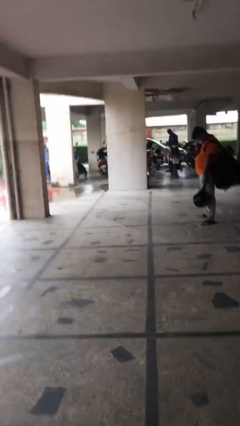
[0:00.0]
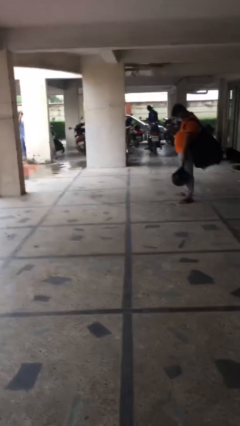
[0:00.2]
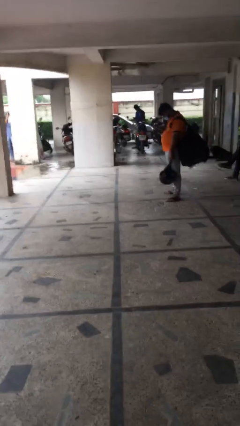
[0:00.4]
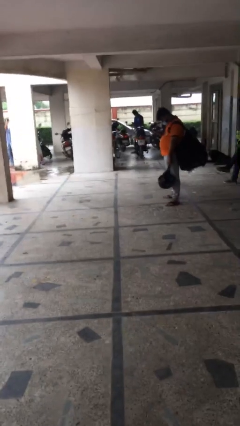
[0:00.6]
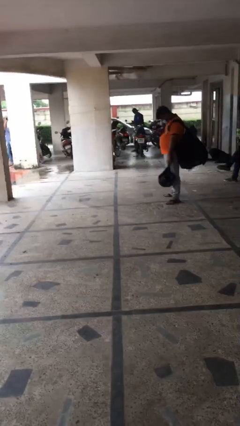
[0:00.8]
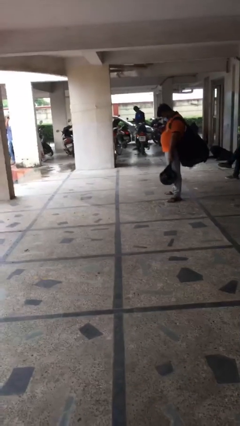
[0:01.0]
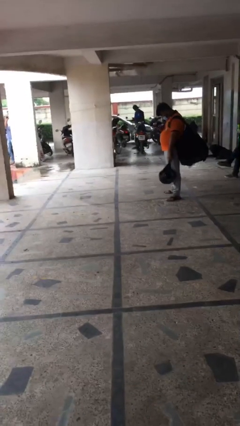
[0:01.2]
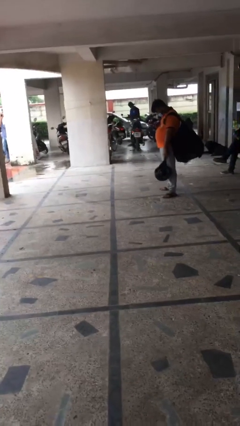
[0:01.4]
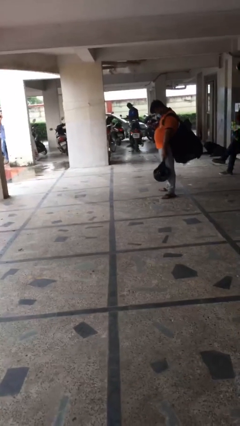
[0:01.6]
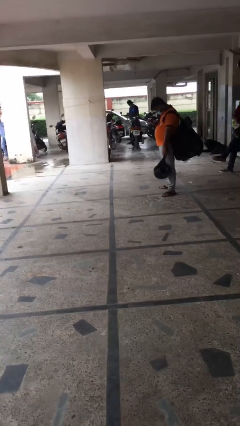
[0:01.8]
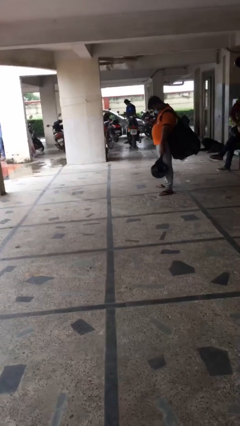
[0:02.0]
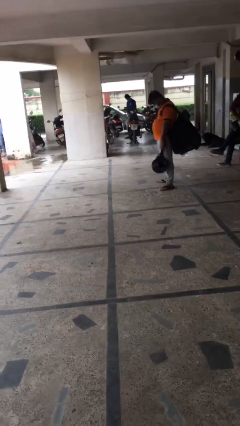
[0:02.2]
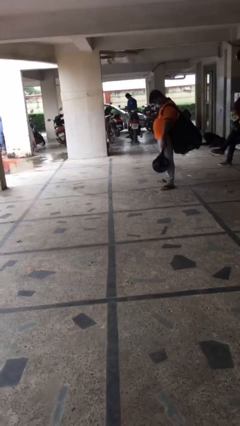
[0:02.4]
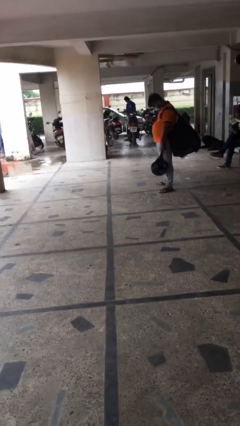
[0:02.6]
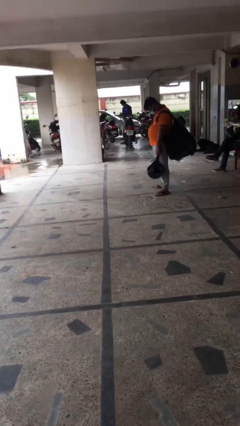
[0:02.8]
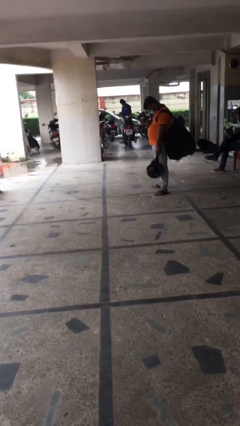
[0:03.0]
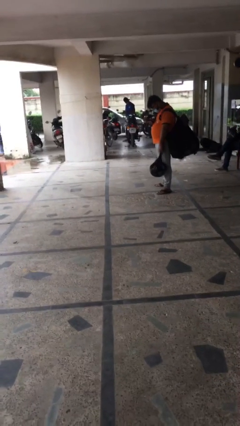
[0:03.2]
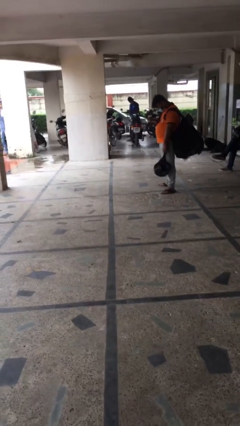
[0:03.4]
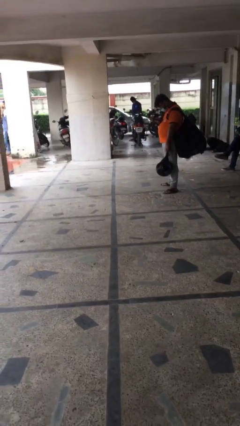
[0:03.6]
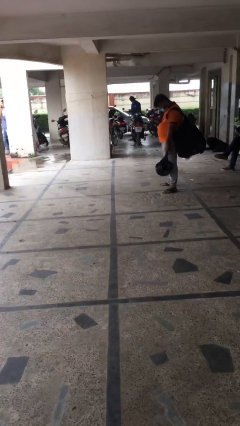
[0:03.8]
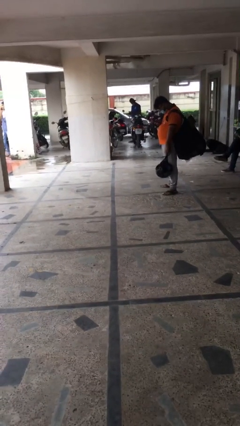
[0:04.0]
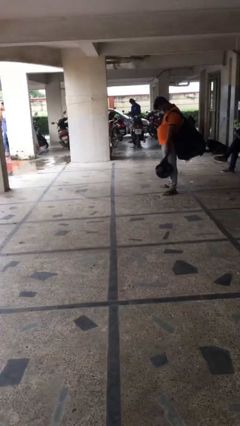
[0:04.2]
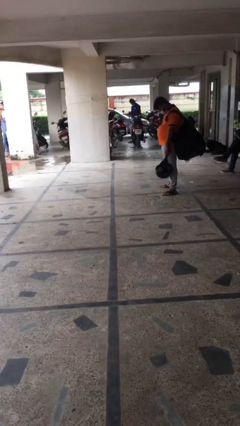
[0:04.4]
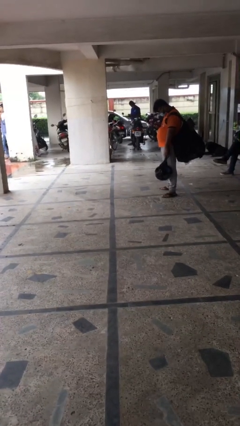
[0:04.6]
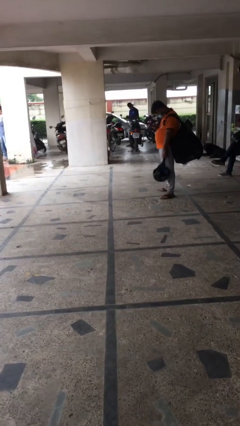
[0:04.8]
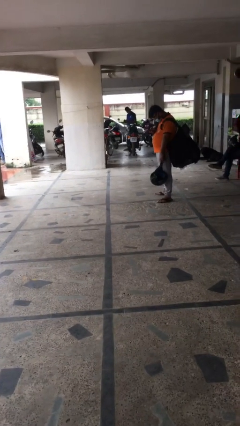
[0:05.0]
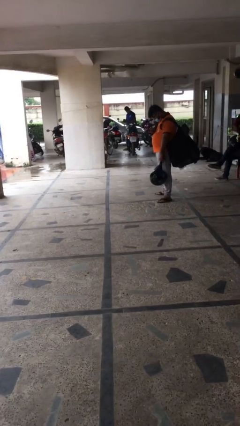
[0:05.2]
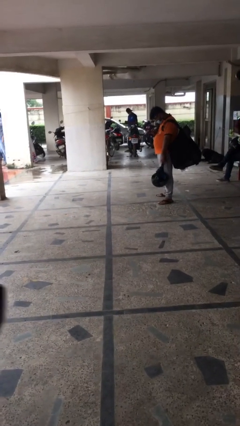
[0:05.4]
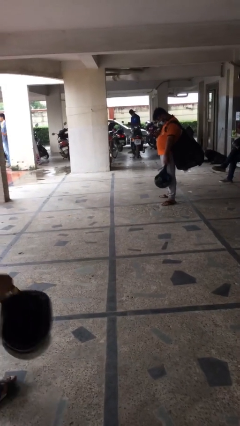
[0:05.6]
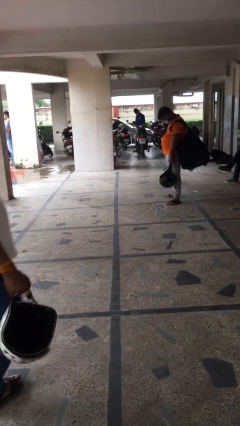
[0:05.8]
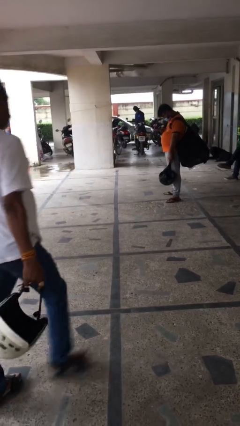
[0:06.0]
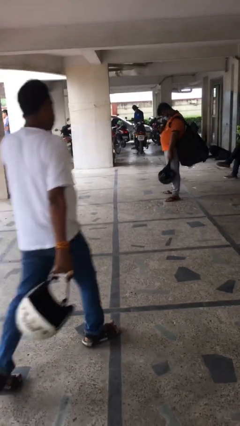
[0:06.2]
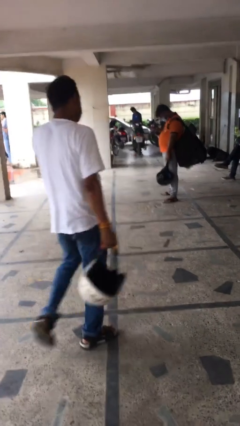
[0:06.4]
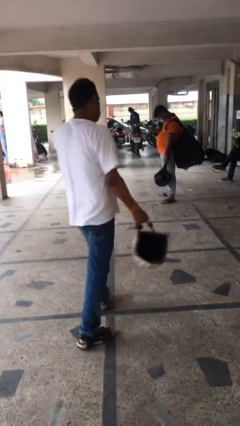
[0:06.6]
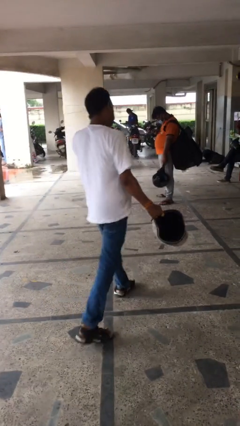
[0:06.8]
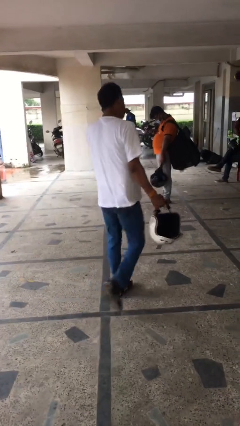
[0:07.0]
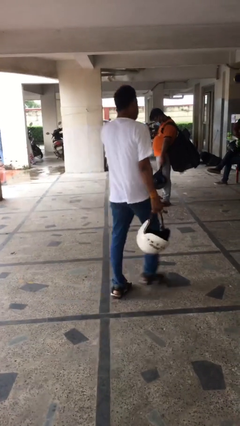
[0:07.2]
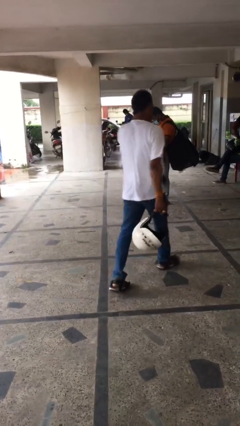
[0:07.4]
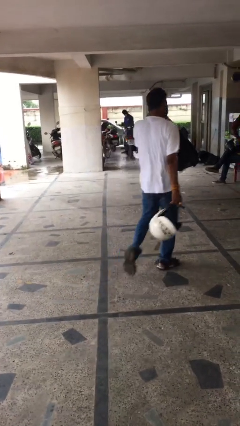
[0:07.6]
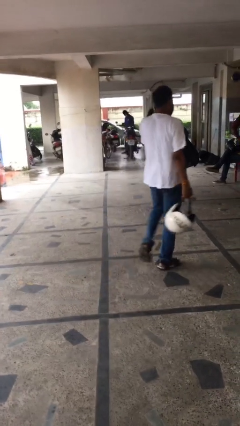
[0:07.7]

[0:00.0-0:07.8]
person texts on phone

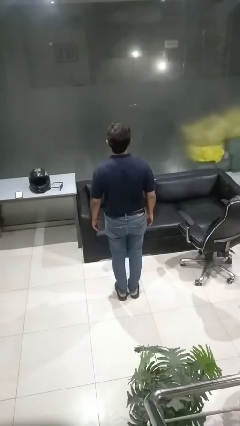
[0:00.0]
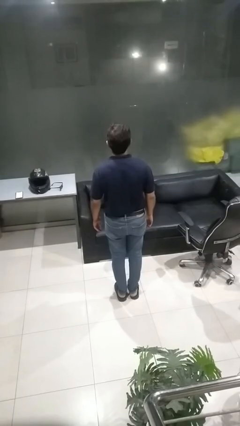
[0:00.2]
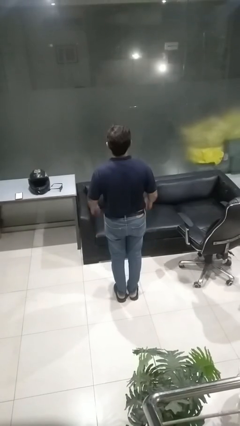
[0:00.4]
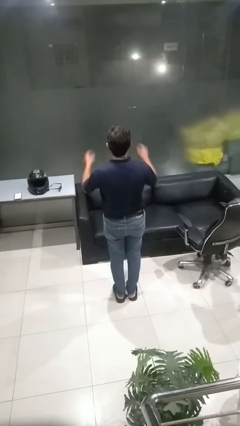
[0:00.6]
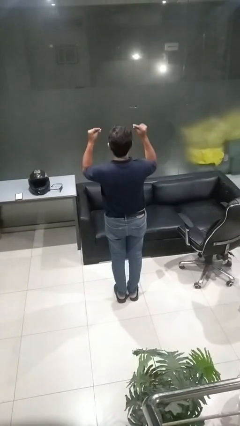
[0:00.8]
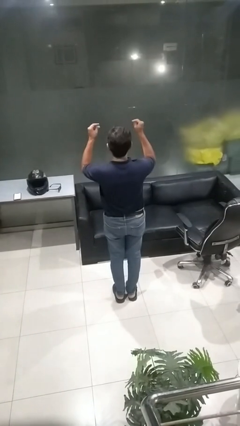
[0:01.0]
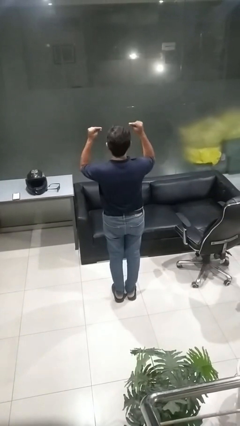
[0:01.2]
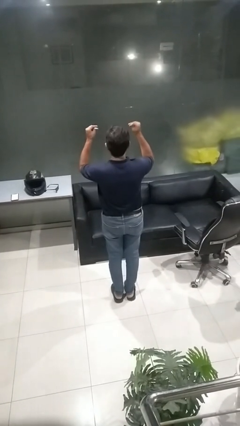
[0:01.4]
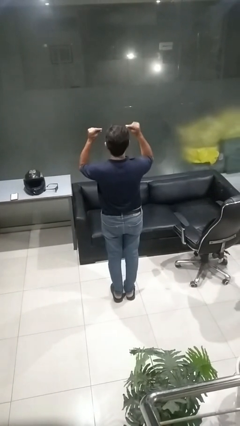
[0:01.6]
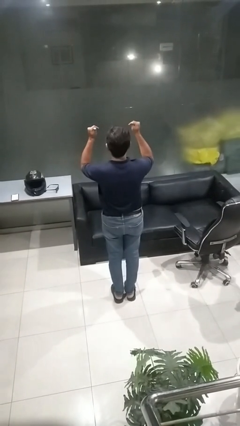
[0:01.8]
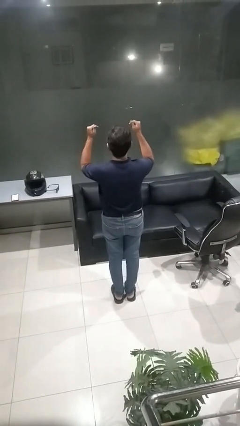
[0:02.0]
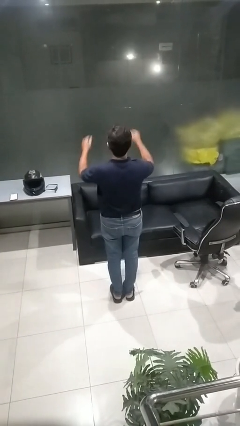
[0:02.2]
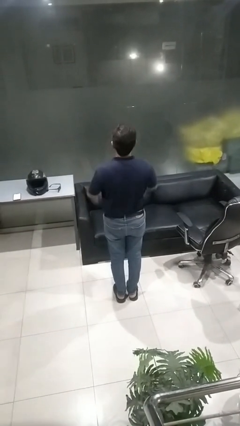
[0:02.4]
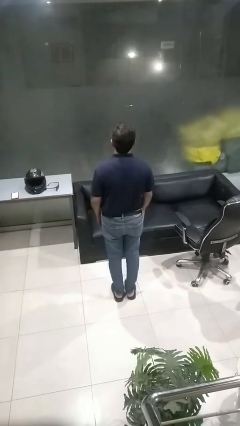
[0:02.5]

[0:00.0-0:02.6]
person snaps fingers

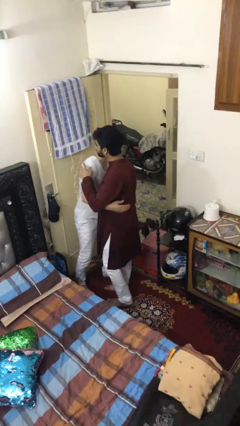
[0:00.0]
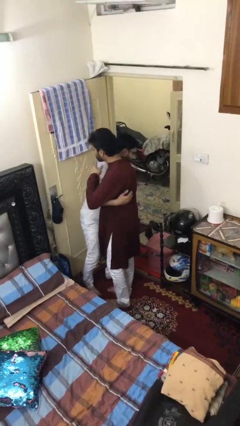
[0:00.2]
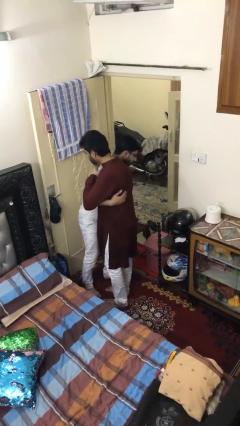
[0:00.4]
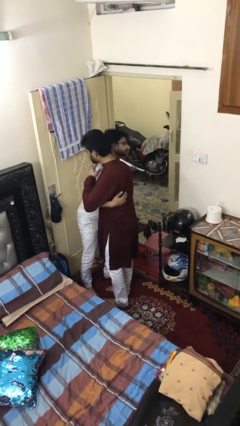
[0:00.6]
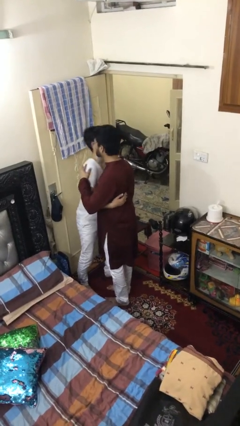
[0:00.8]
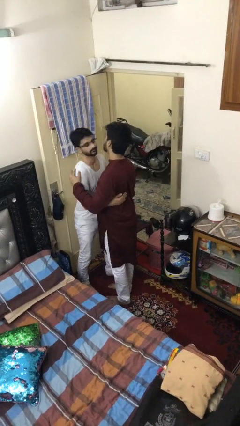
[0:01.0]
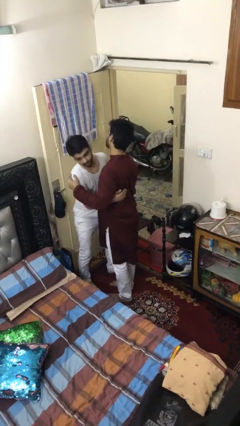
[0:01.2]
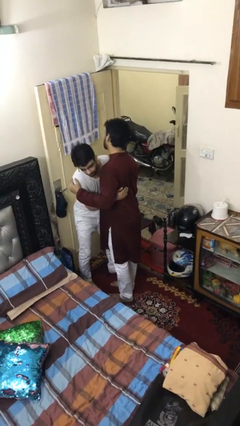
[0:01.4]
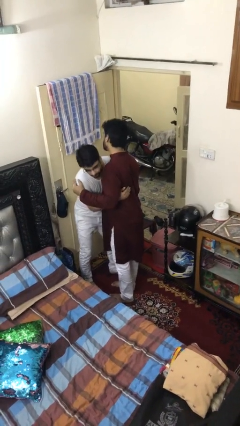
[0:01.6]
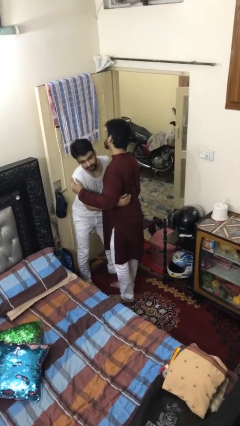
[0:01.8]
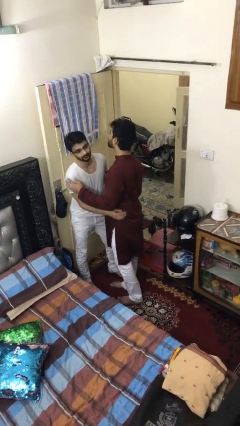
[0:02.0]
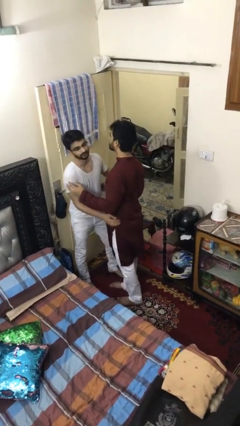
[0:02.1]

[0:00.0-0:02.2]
person embraces person

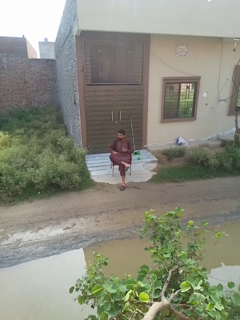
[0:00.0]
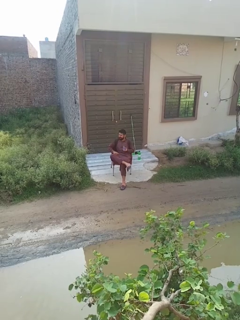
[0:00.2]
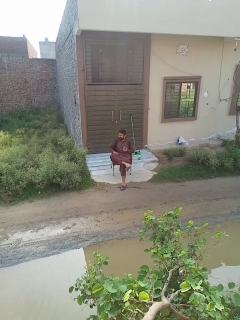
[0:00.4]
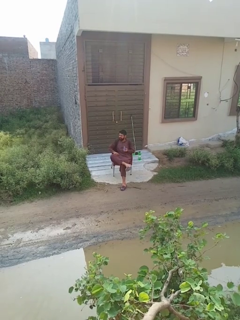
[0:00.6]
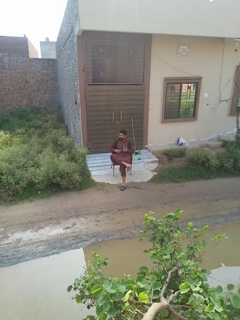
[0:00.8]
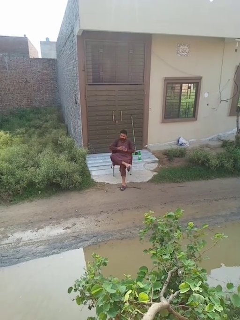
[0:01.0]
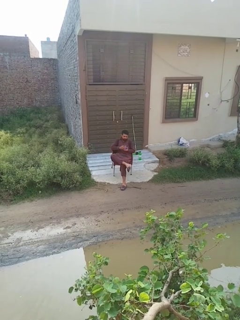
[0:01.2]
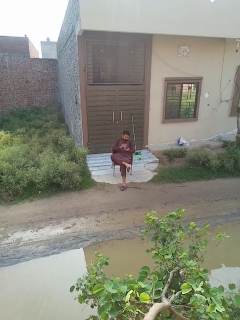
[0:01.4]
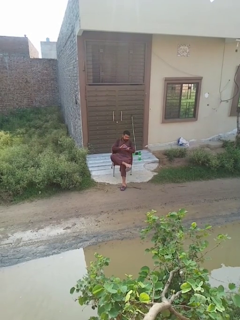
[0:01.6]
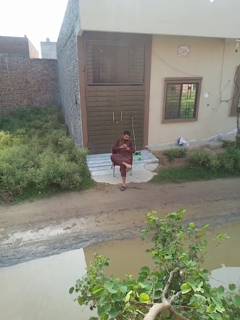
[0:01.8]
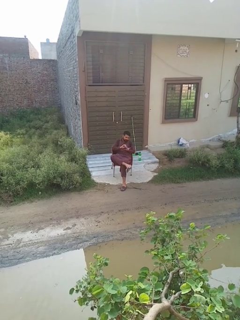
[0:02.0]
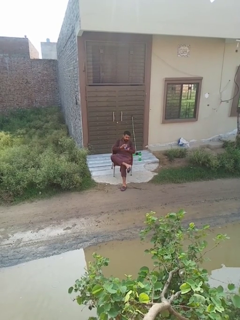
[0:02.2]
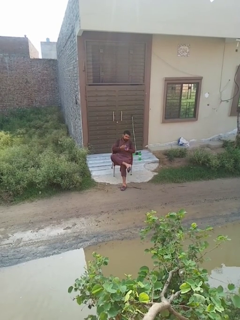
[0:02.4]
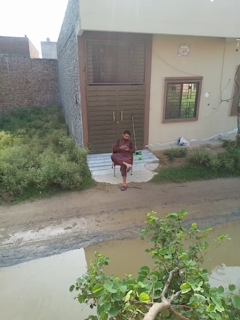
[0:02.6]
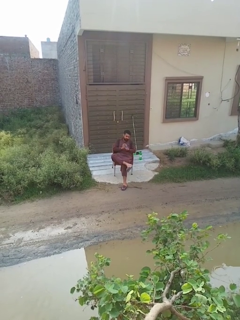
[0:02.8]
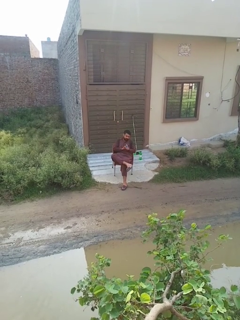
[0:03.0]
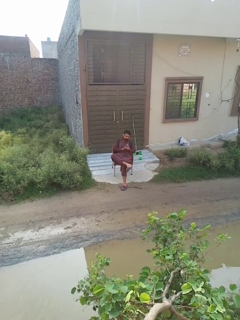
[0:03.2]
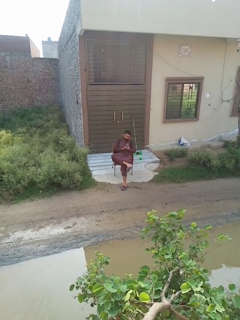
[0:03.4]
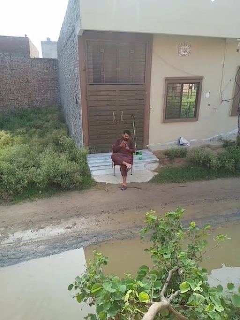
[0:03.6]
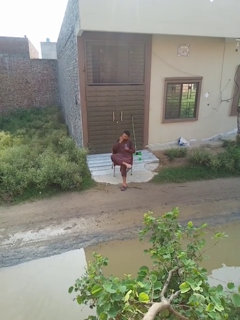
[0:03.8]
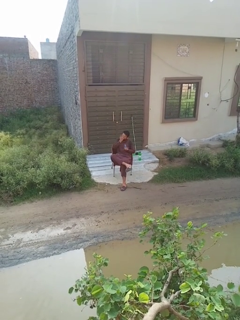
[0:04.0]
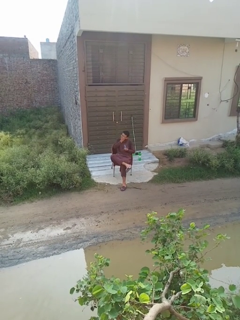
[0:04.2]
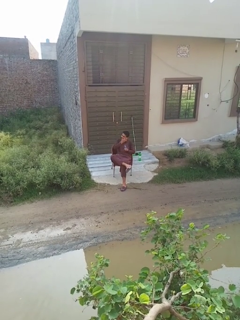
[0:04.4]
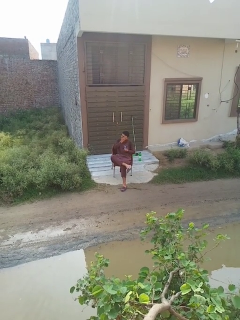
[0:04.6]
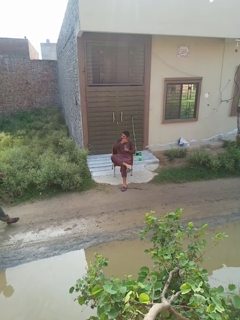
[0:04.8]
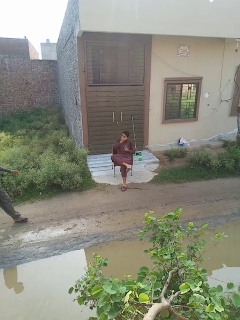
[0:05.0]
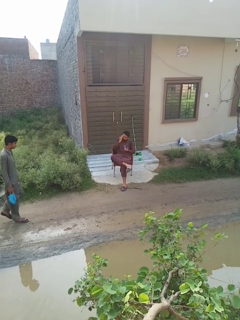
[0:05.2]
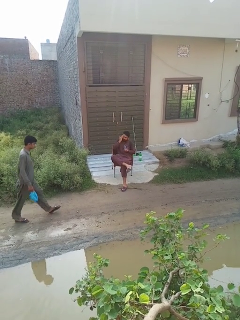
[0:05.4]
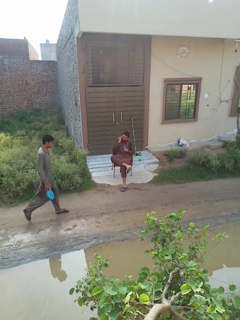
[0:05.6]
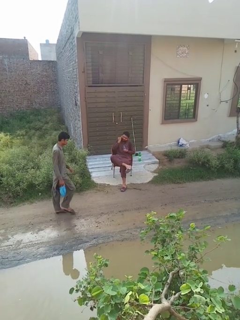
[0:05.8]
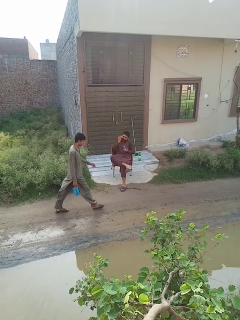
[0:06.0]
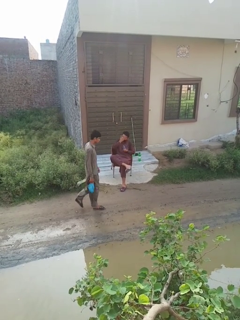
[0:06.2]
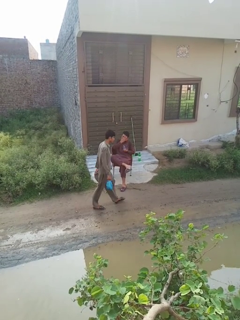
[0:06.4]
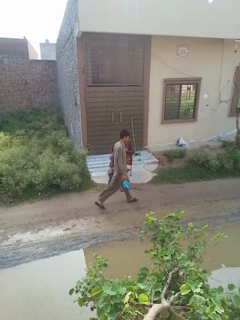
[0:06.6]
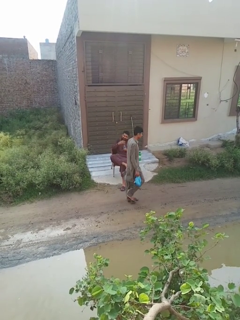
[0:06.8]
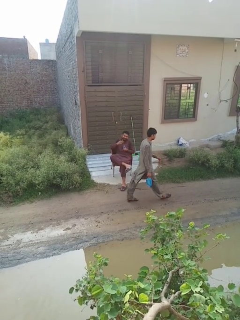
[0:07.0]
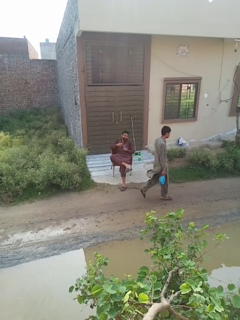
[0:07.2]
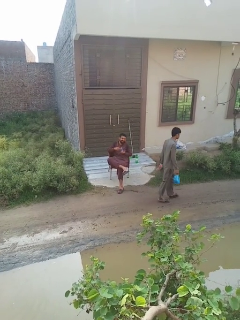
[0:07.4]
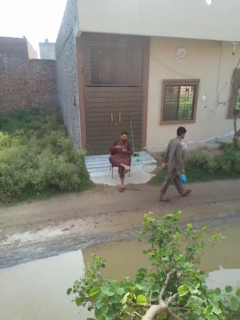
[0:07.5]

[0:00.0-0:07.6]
person applies facial moisturizer
